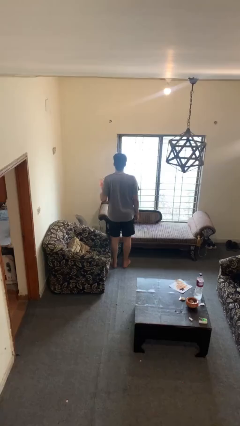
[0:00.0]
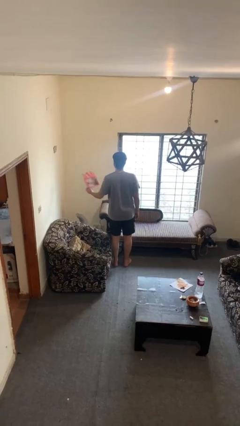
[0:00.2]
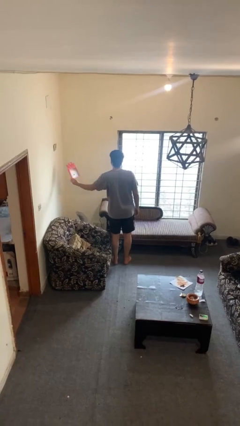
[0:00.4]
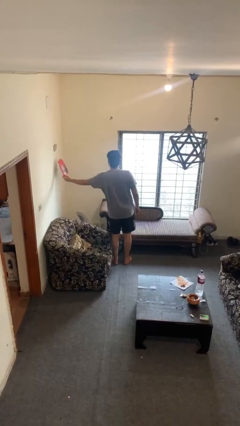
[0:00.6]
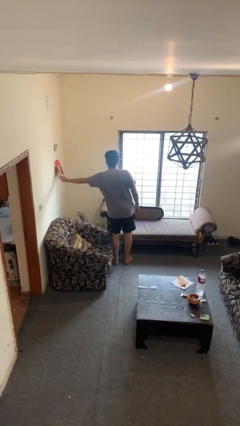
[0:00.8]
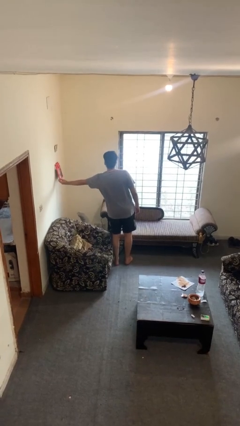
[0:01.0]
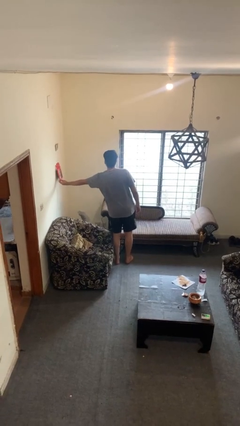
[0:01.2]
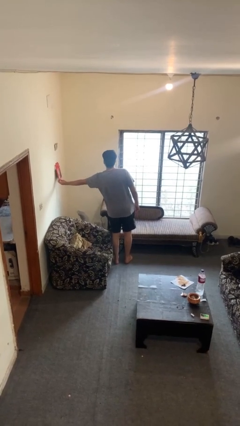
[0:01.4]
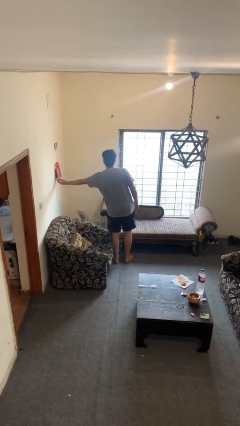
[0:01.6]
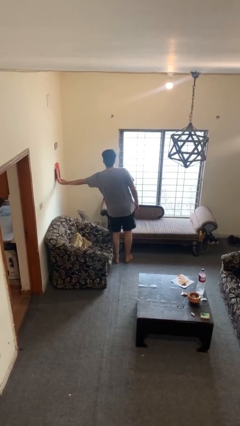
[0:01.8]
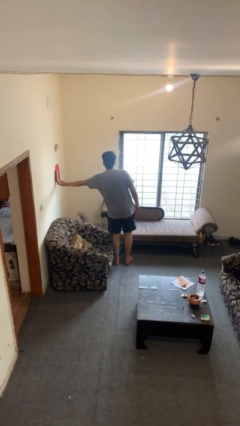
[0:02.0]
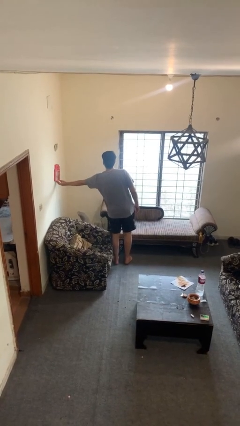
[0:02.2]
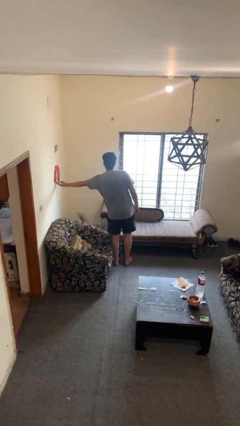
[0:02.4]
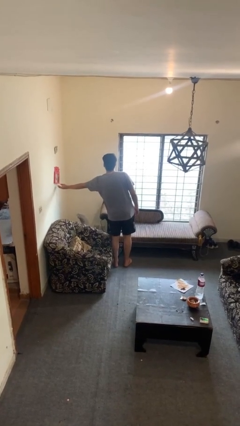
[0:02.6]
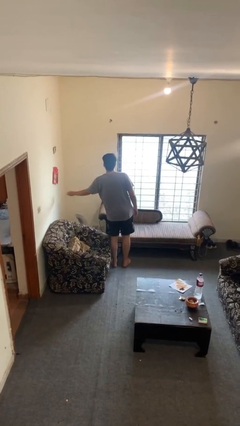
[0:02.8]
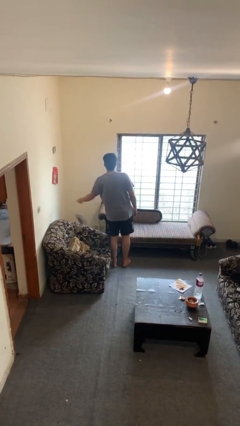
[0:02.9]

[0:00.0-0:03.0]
person puts up picture frame

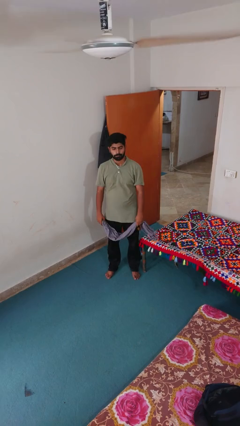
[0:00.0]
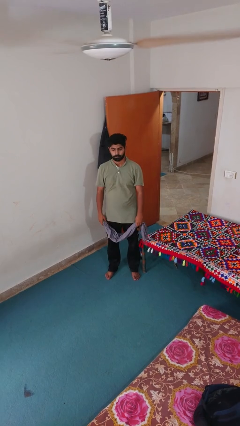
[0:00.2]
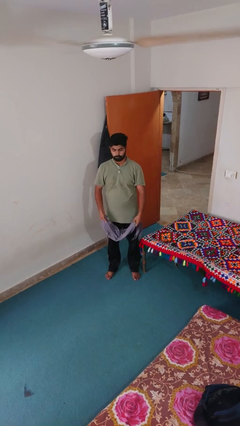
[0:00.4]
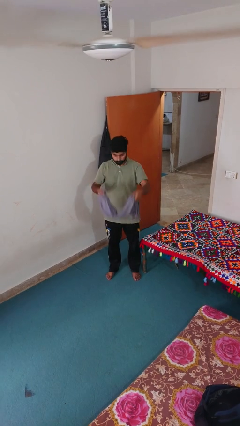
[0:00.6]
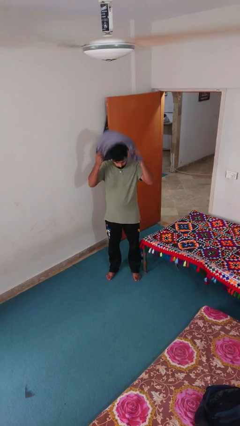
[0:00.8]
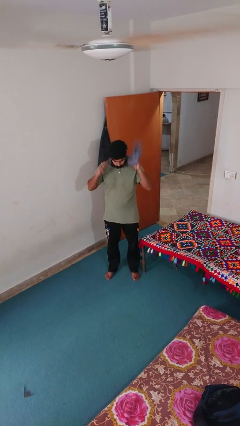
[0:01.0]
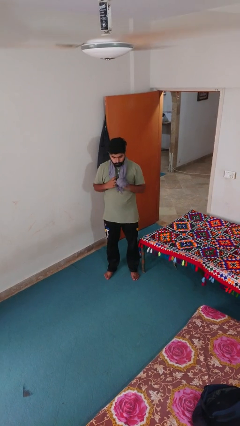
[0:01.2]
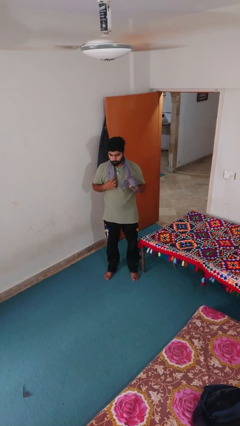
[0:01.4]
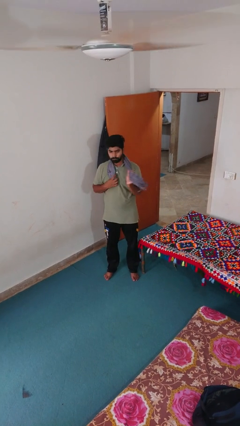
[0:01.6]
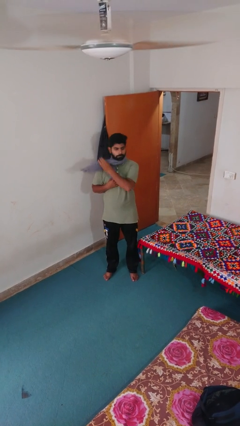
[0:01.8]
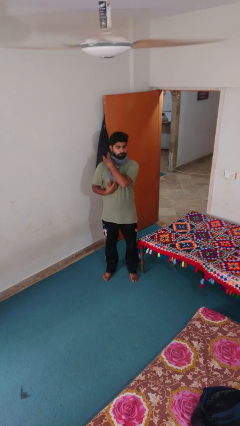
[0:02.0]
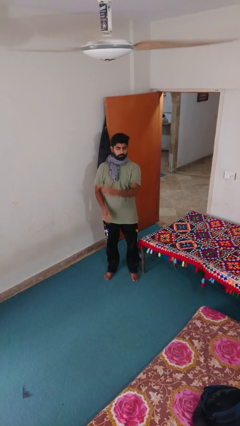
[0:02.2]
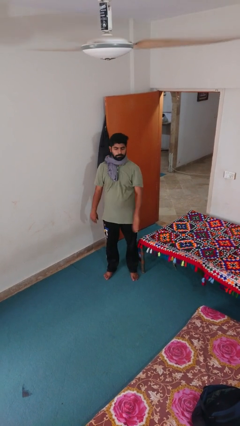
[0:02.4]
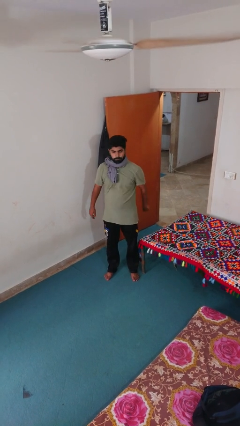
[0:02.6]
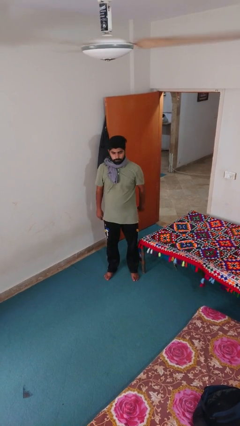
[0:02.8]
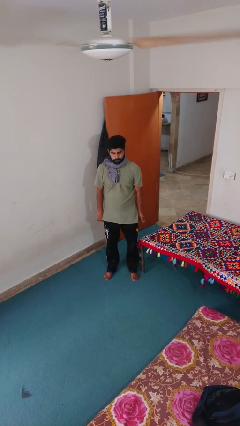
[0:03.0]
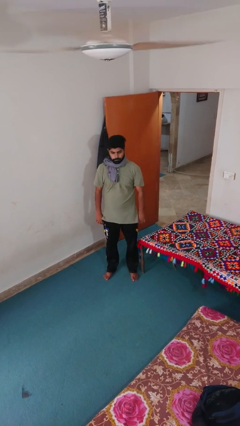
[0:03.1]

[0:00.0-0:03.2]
person puts on scarf

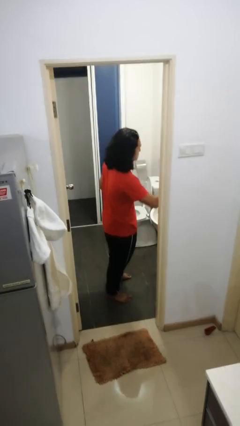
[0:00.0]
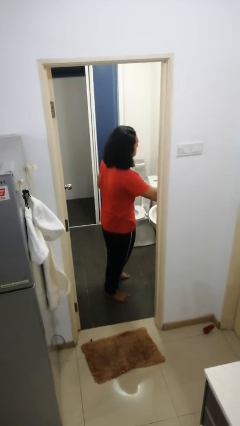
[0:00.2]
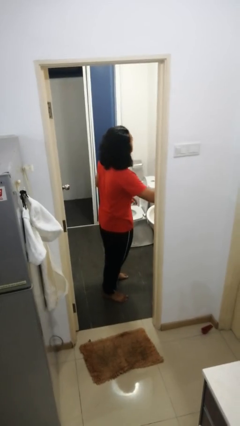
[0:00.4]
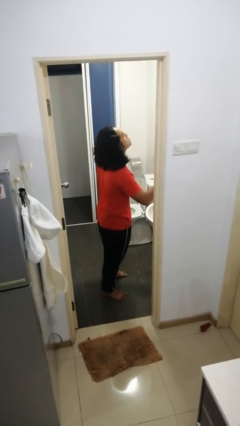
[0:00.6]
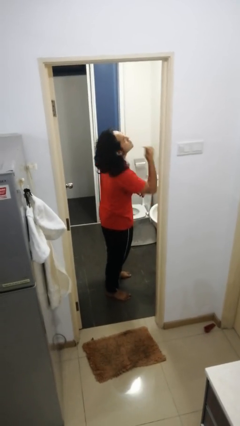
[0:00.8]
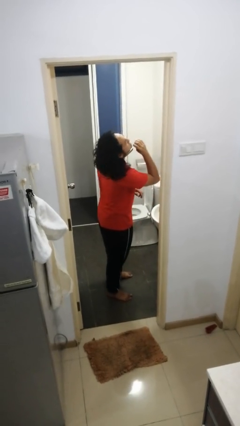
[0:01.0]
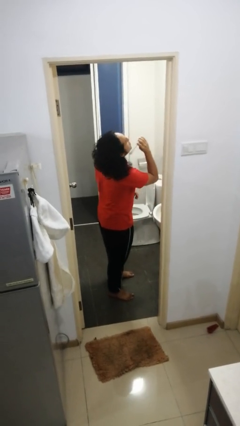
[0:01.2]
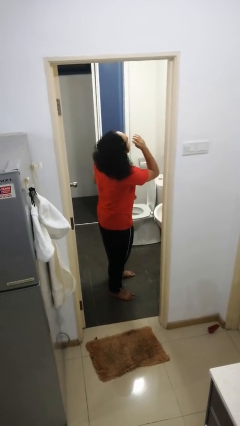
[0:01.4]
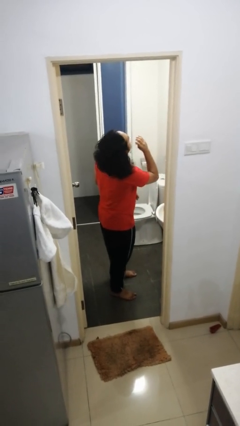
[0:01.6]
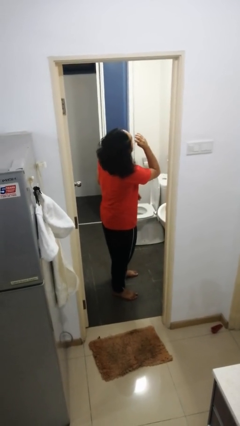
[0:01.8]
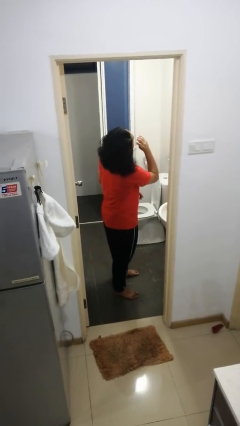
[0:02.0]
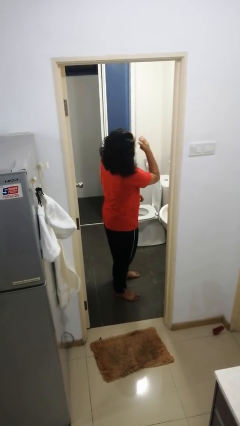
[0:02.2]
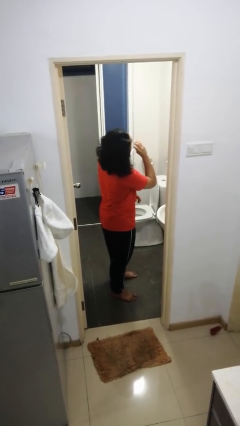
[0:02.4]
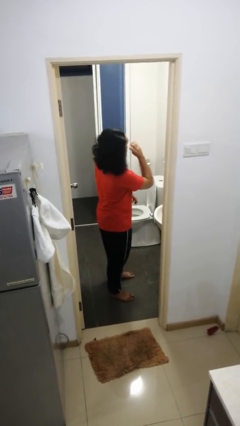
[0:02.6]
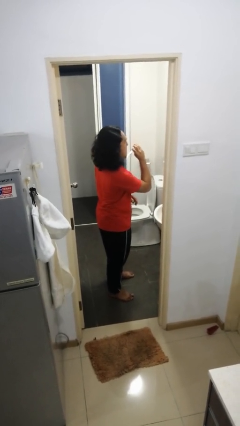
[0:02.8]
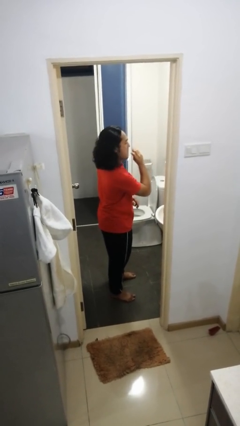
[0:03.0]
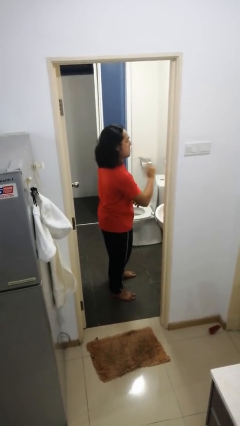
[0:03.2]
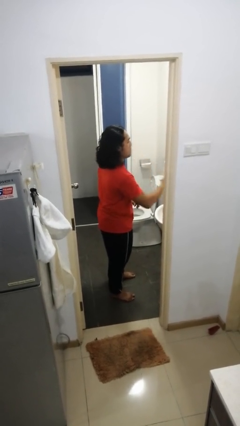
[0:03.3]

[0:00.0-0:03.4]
person shaves face

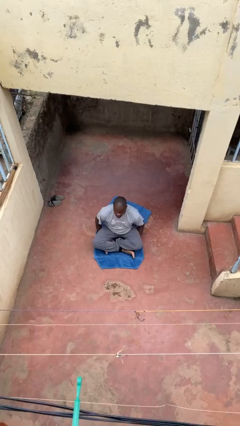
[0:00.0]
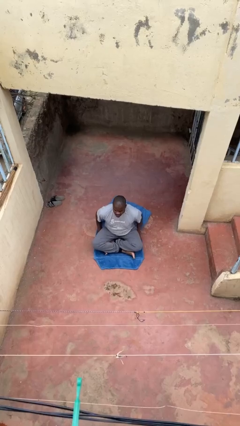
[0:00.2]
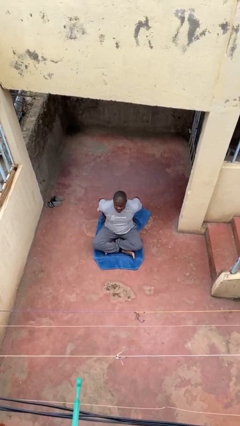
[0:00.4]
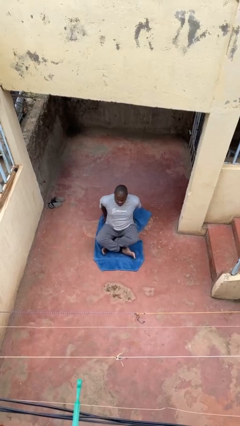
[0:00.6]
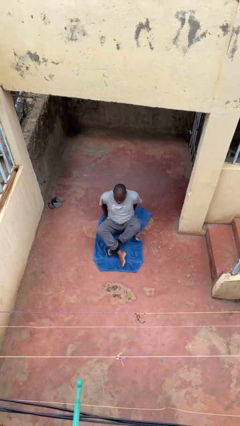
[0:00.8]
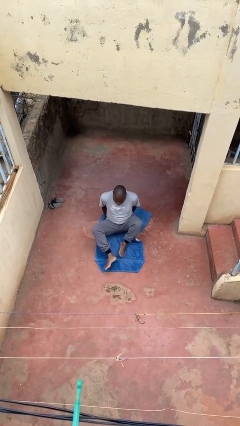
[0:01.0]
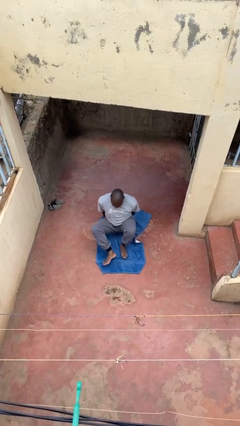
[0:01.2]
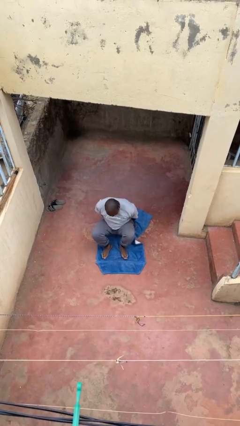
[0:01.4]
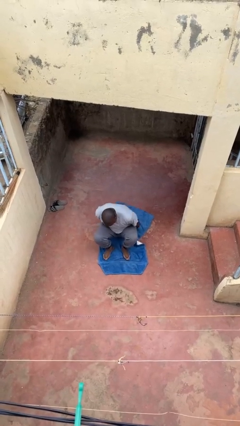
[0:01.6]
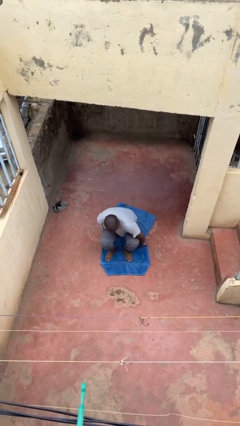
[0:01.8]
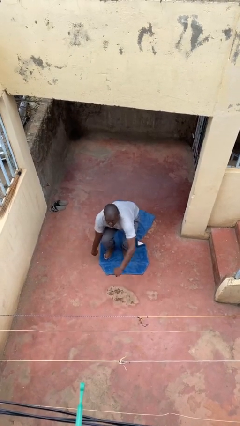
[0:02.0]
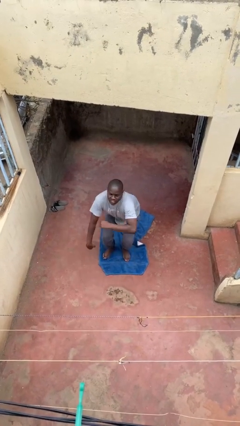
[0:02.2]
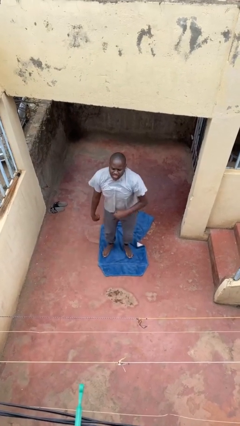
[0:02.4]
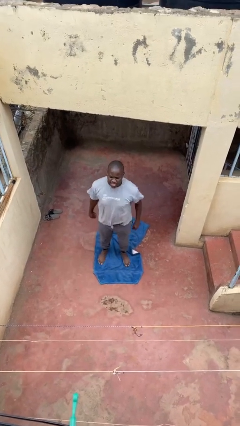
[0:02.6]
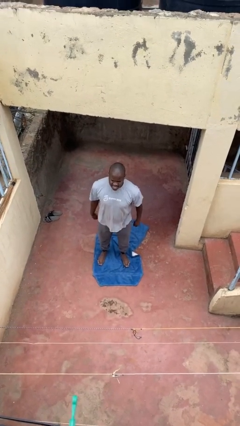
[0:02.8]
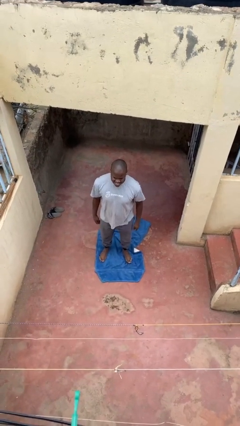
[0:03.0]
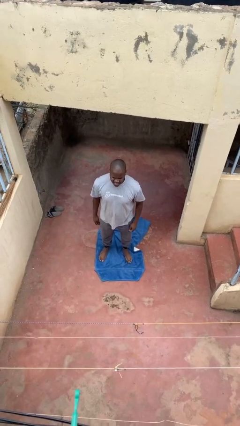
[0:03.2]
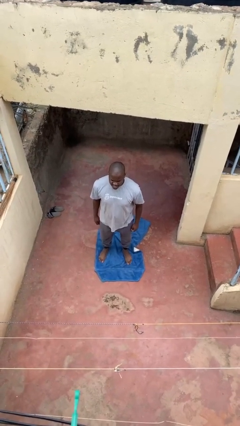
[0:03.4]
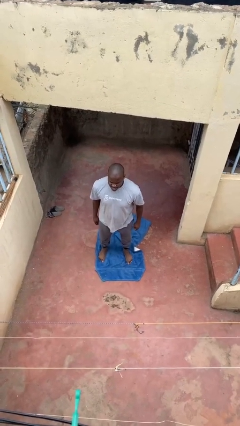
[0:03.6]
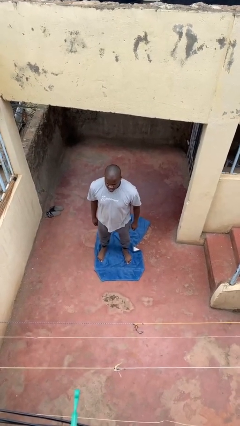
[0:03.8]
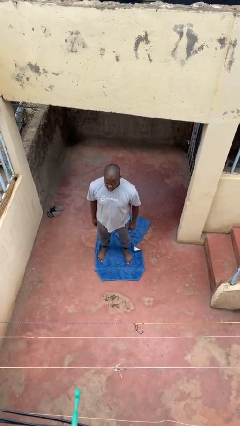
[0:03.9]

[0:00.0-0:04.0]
person stands up from floor

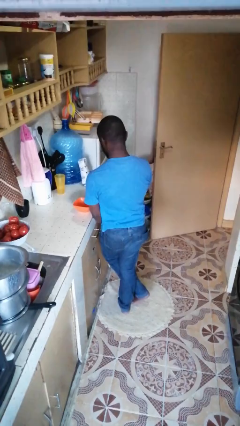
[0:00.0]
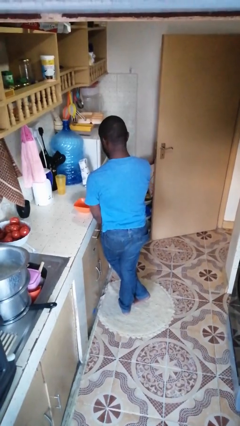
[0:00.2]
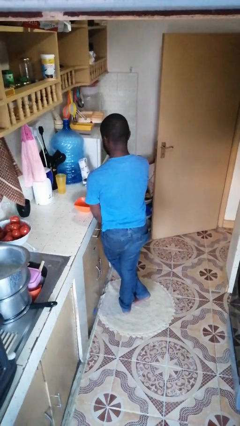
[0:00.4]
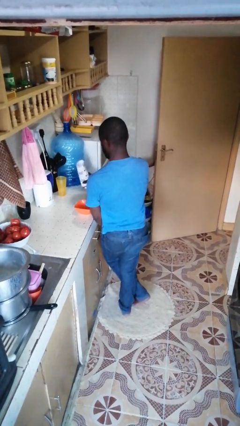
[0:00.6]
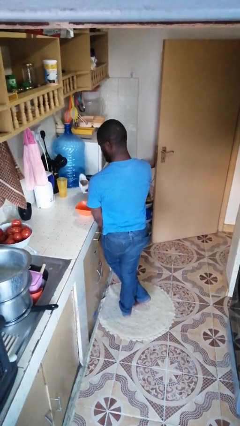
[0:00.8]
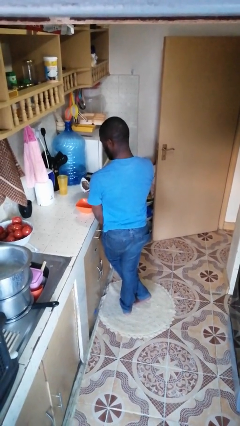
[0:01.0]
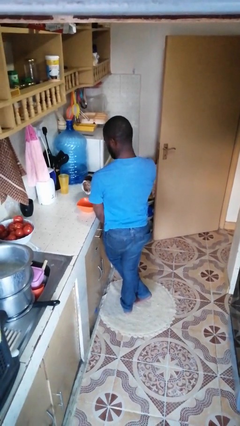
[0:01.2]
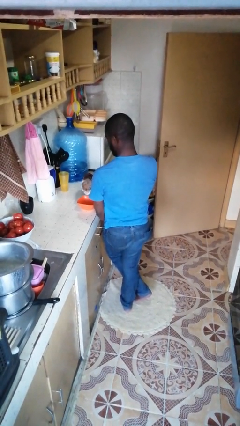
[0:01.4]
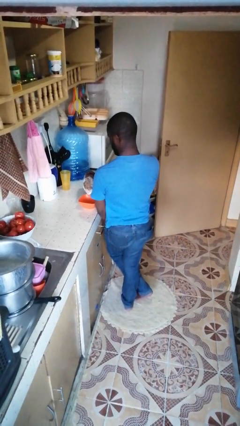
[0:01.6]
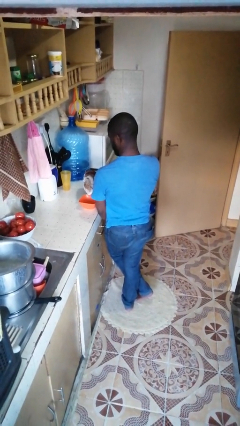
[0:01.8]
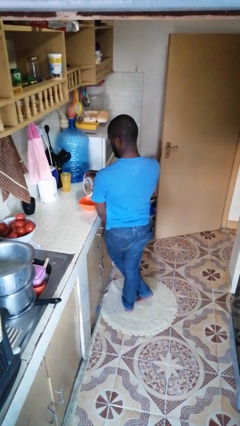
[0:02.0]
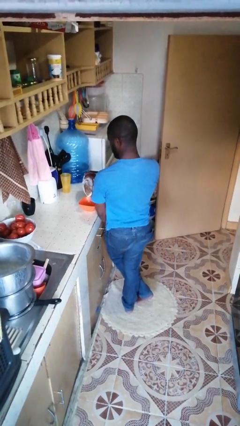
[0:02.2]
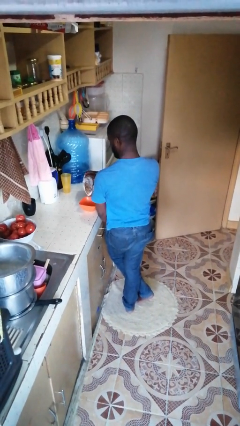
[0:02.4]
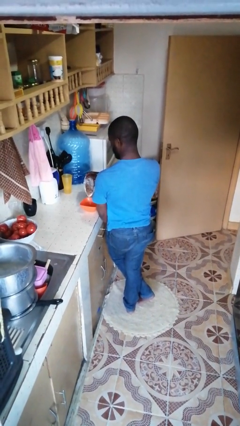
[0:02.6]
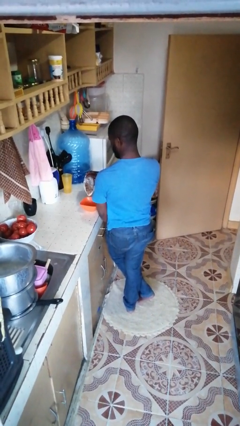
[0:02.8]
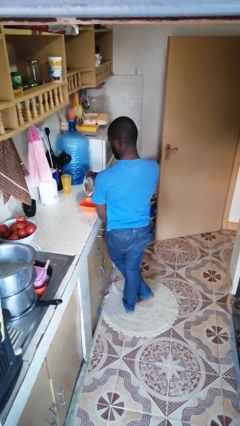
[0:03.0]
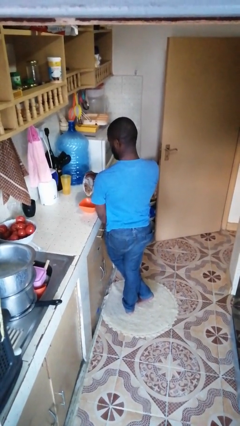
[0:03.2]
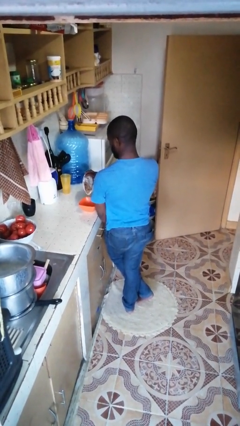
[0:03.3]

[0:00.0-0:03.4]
person pours into bowl

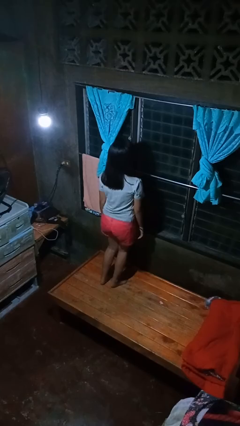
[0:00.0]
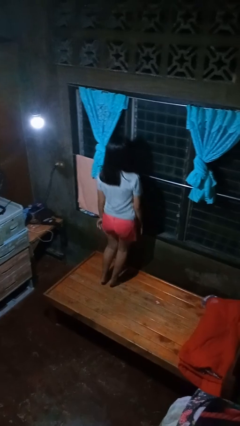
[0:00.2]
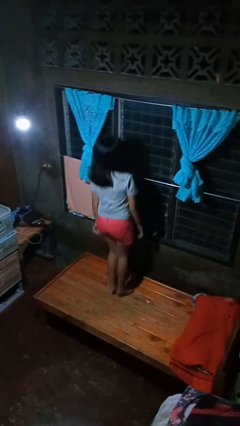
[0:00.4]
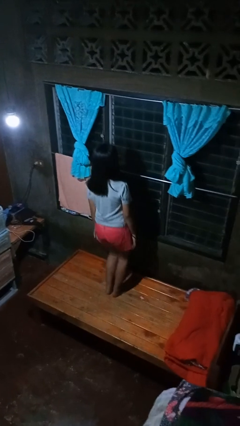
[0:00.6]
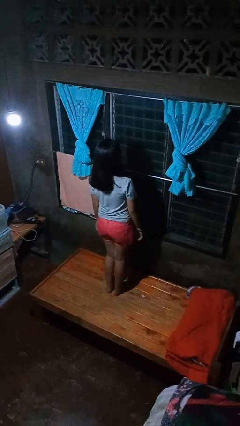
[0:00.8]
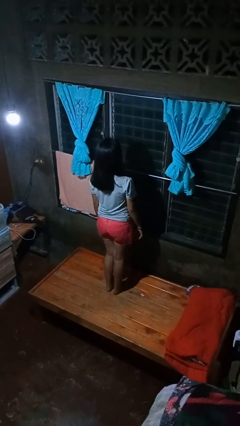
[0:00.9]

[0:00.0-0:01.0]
person jumps on bed
